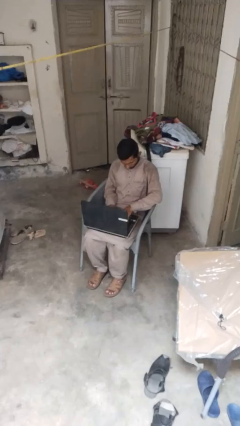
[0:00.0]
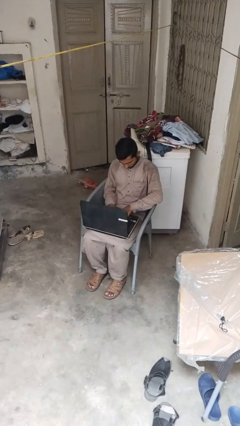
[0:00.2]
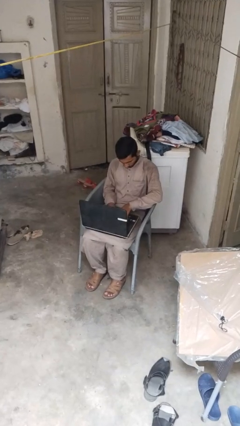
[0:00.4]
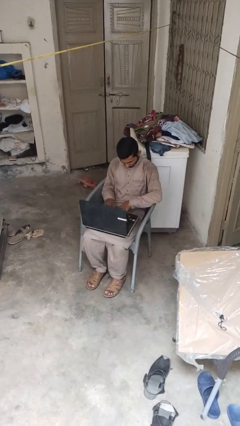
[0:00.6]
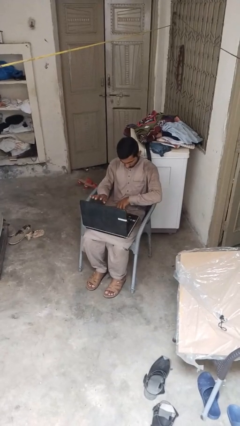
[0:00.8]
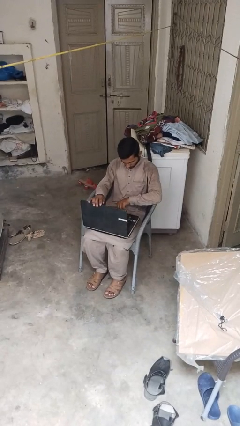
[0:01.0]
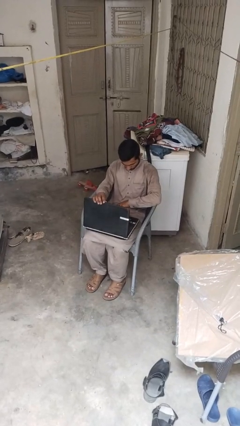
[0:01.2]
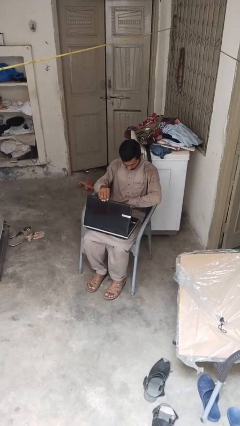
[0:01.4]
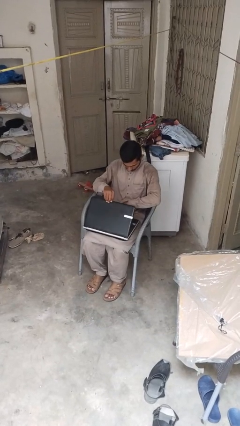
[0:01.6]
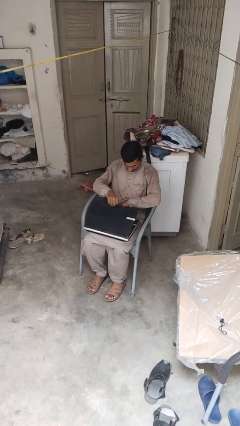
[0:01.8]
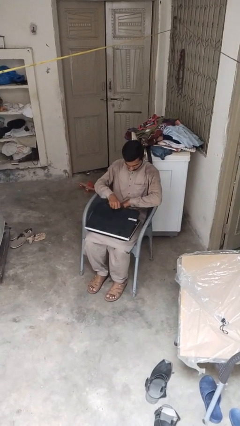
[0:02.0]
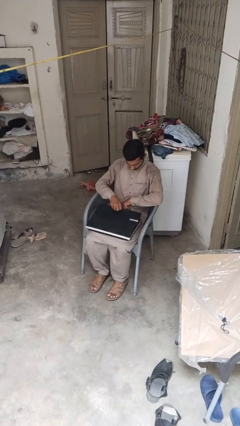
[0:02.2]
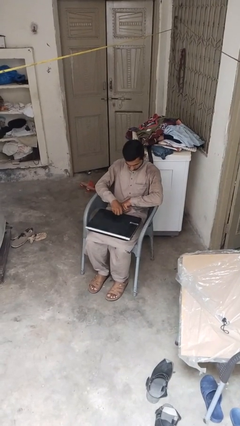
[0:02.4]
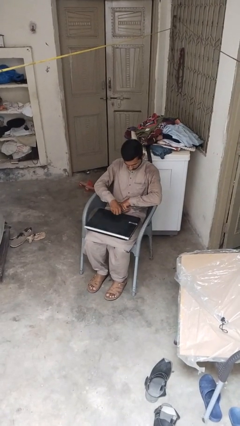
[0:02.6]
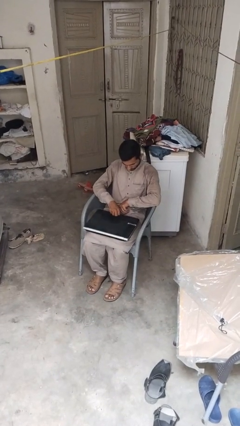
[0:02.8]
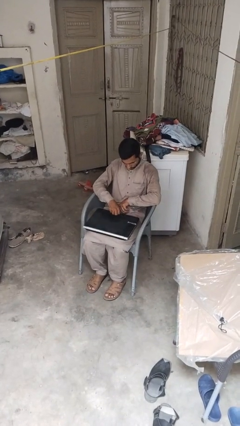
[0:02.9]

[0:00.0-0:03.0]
person closes laptop

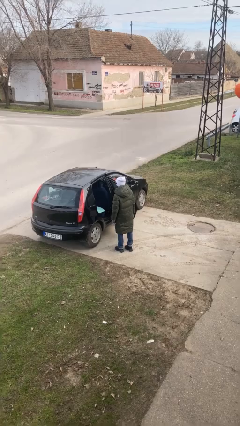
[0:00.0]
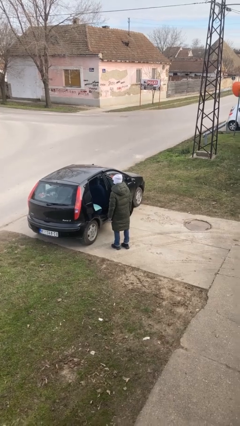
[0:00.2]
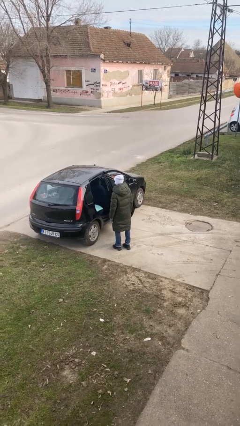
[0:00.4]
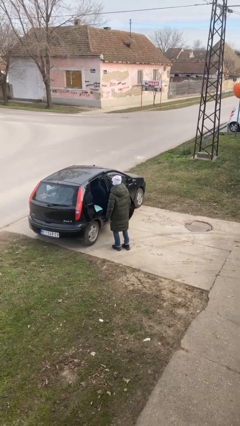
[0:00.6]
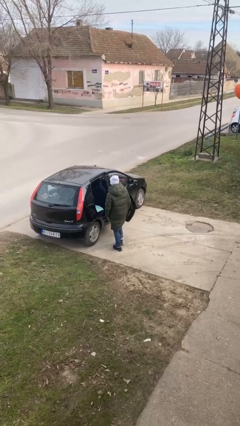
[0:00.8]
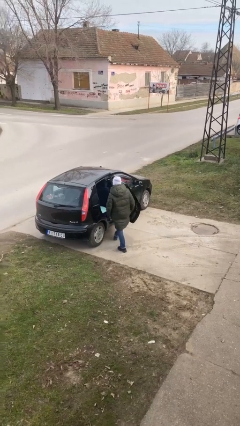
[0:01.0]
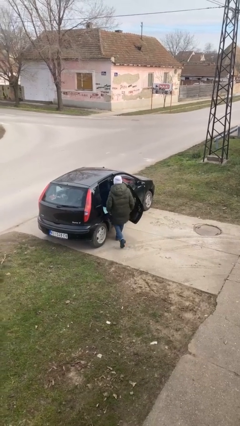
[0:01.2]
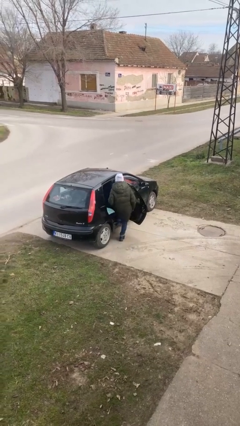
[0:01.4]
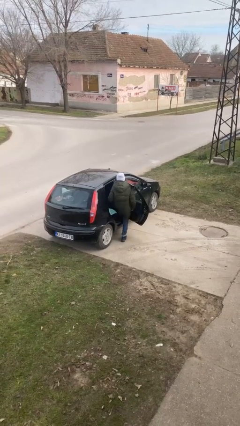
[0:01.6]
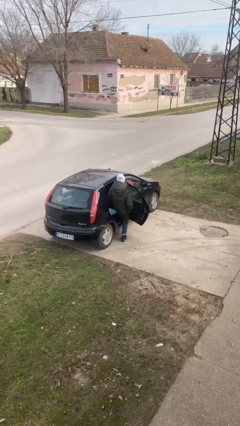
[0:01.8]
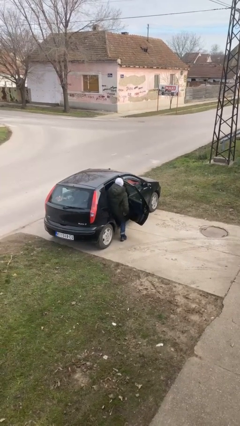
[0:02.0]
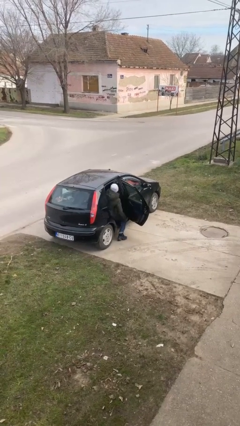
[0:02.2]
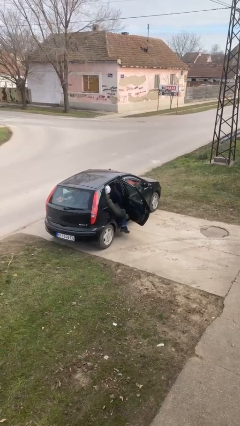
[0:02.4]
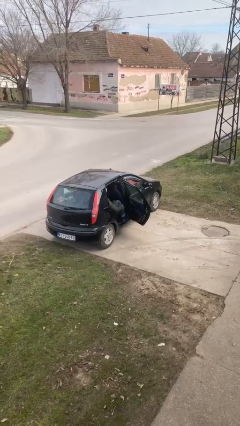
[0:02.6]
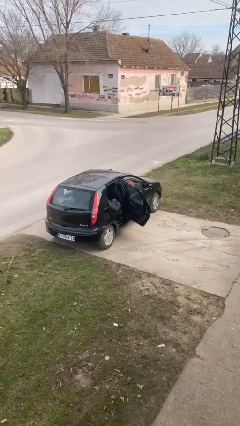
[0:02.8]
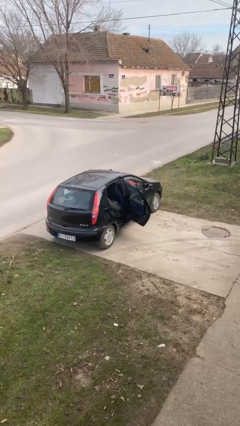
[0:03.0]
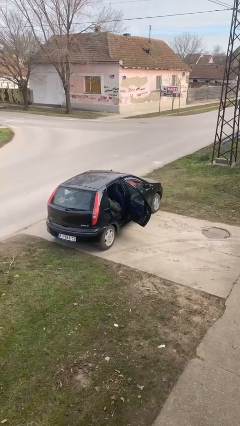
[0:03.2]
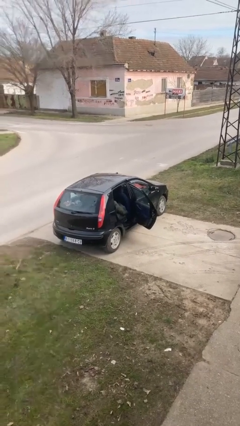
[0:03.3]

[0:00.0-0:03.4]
person enters car

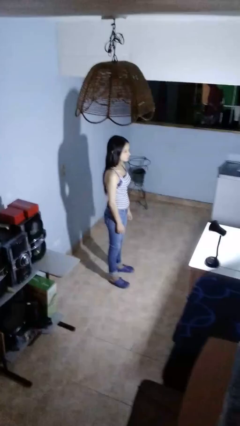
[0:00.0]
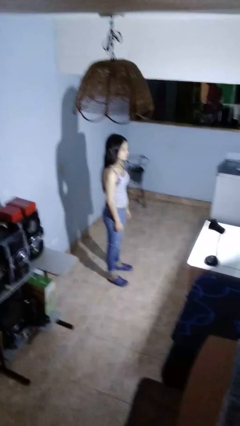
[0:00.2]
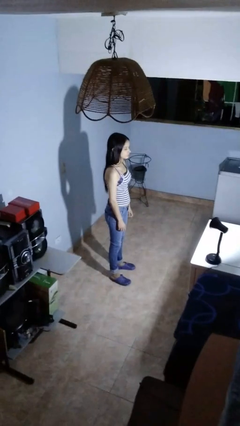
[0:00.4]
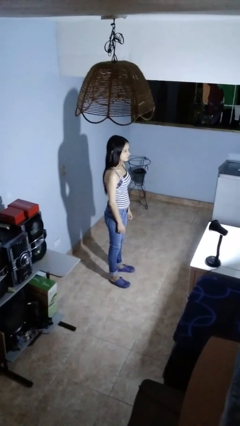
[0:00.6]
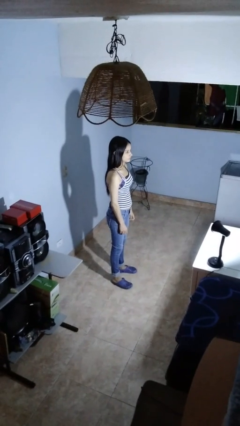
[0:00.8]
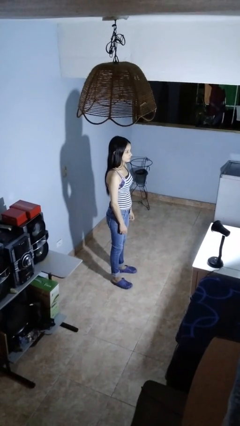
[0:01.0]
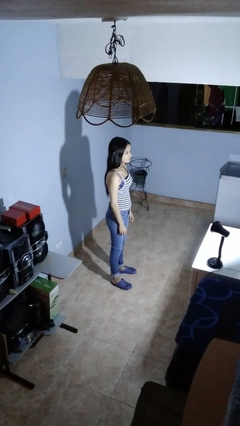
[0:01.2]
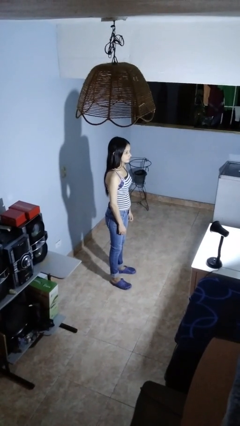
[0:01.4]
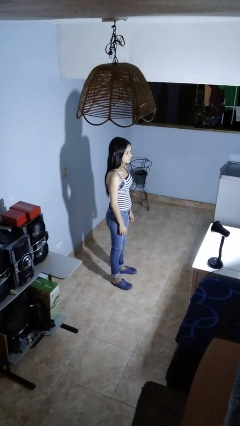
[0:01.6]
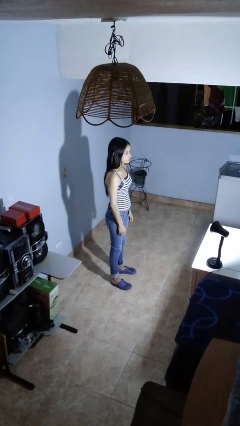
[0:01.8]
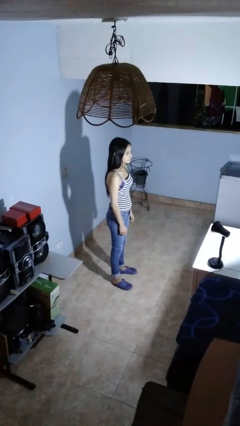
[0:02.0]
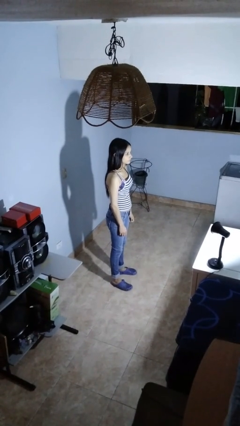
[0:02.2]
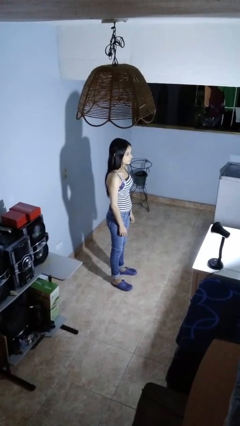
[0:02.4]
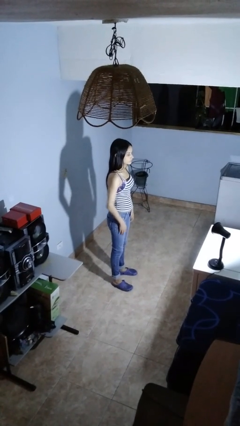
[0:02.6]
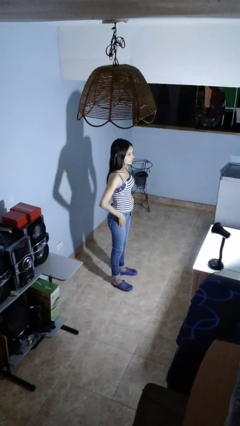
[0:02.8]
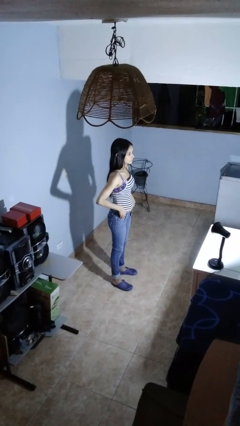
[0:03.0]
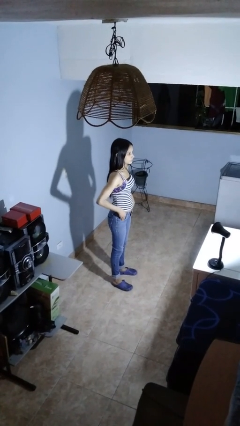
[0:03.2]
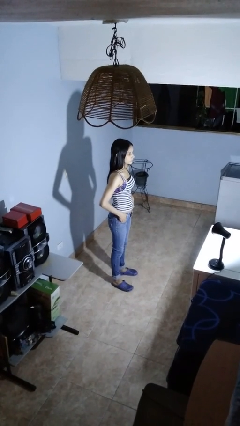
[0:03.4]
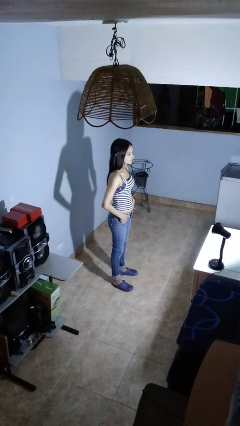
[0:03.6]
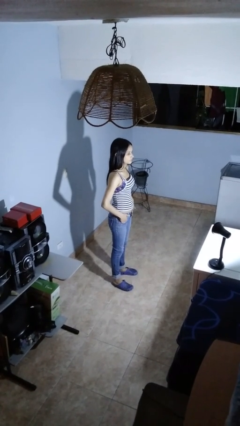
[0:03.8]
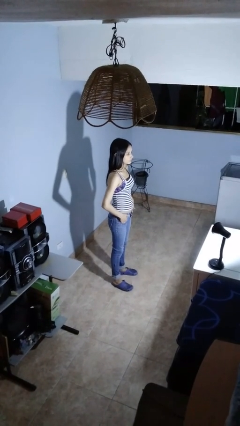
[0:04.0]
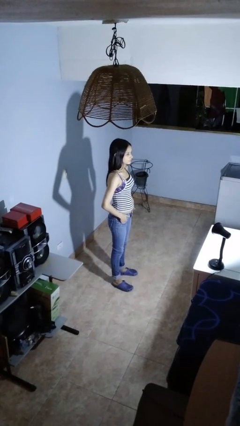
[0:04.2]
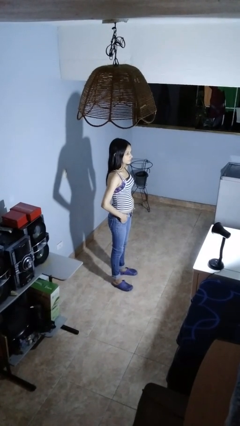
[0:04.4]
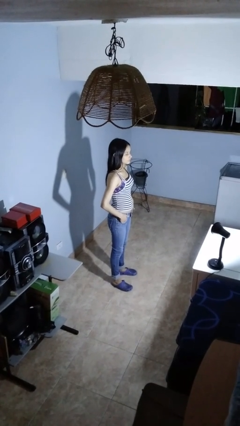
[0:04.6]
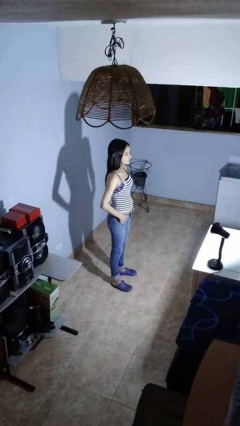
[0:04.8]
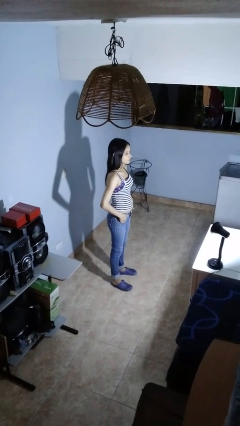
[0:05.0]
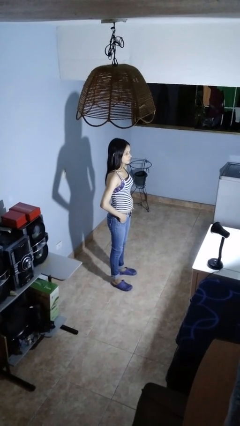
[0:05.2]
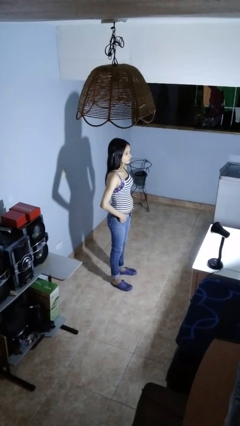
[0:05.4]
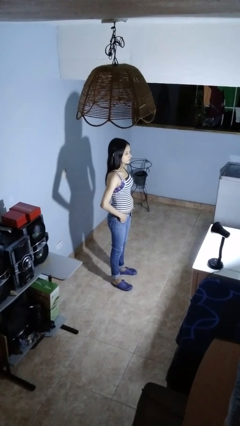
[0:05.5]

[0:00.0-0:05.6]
person puts hands in back pockets

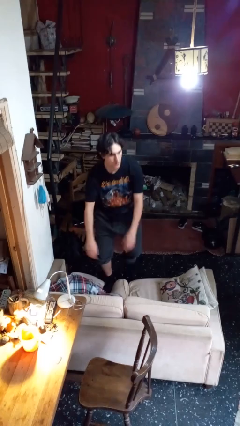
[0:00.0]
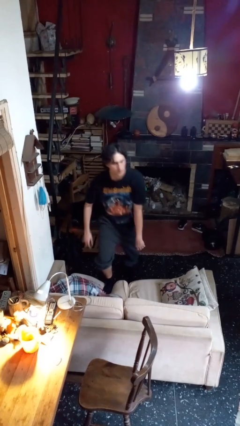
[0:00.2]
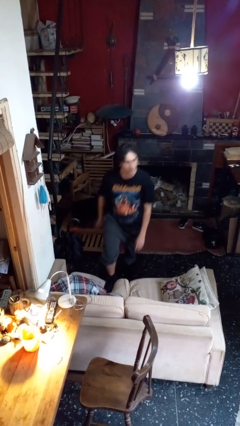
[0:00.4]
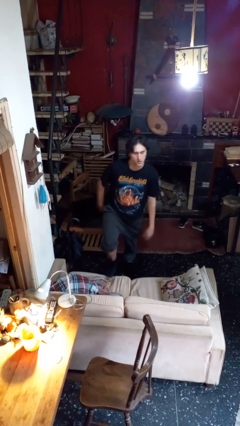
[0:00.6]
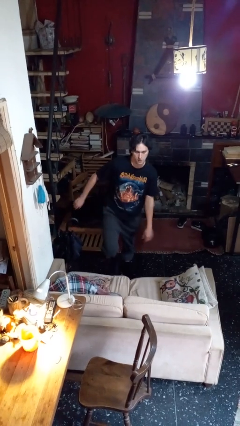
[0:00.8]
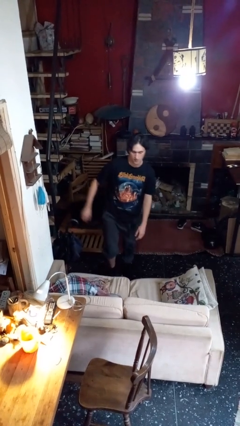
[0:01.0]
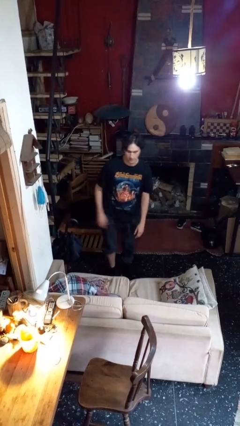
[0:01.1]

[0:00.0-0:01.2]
person climbs off couch

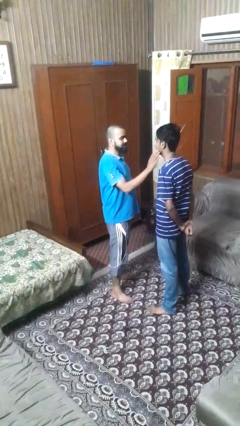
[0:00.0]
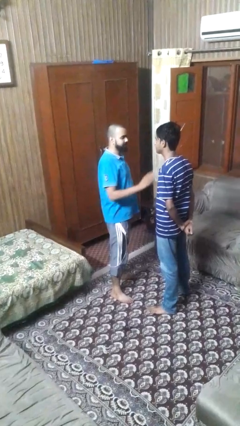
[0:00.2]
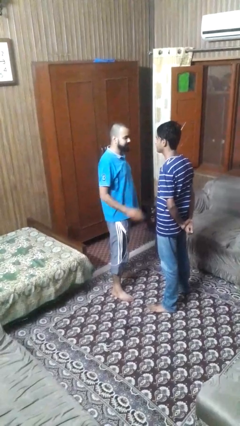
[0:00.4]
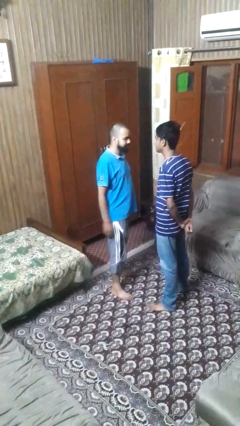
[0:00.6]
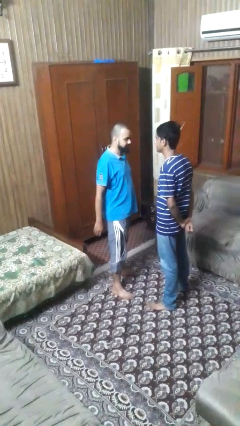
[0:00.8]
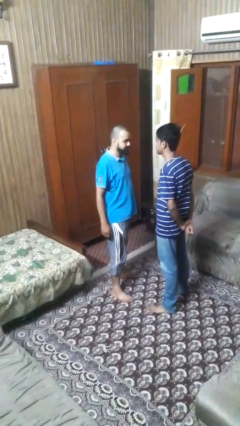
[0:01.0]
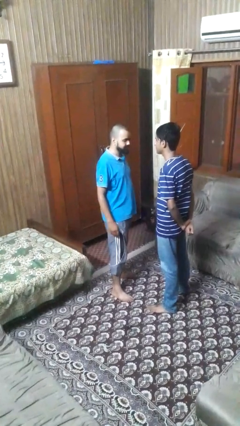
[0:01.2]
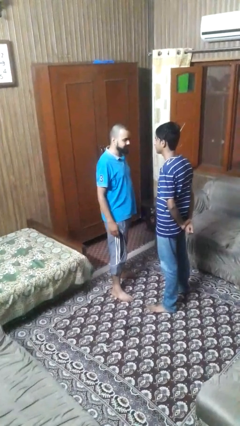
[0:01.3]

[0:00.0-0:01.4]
person touches face of person

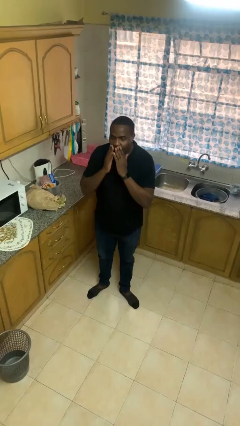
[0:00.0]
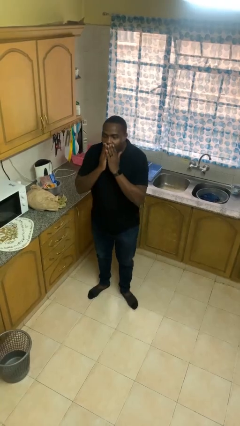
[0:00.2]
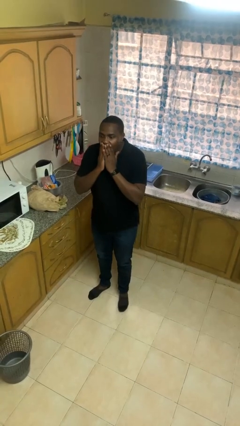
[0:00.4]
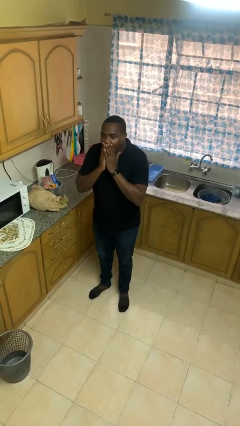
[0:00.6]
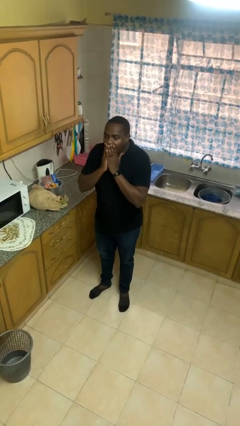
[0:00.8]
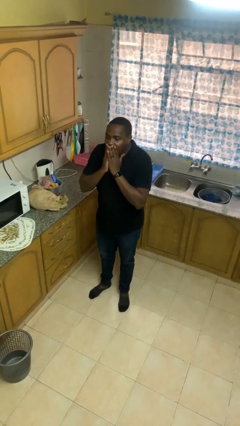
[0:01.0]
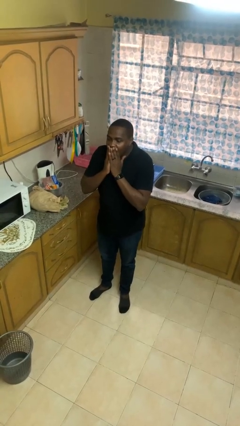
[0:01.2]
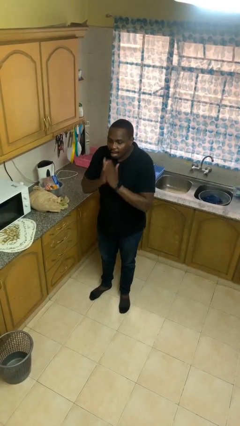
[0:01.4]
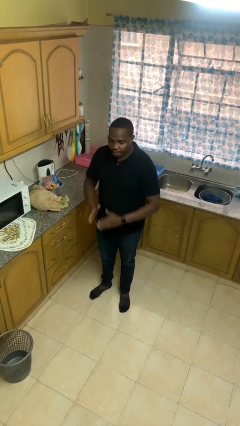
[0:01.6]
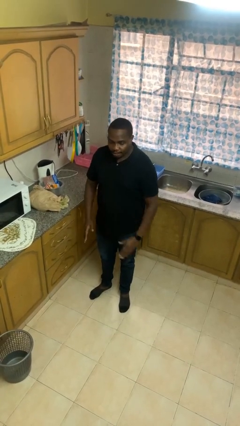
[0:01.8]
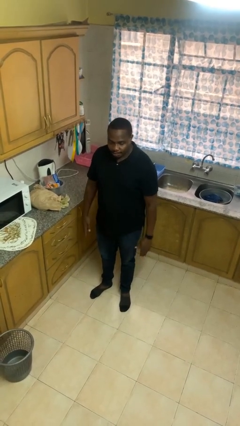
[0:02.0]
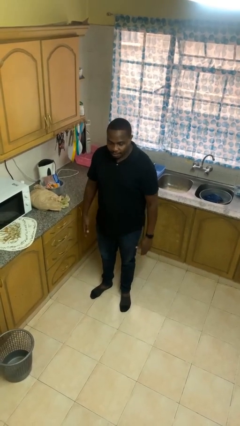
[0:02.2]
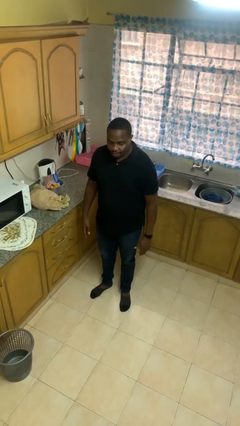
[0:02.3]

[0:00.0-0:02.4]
person yawns
